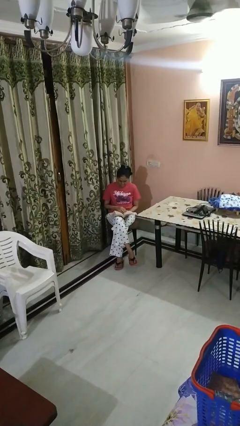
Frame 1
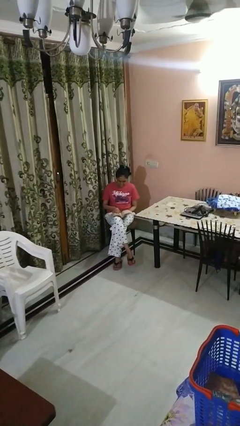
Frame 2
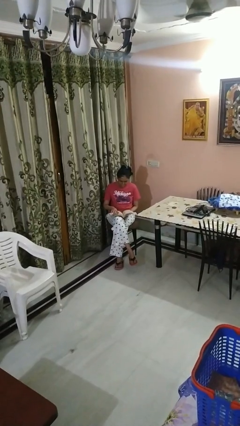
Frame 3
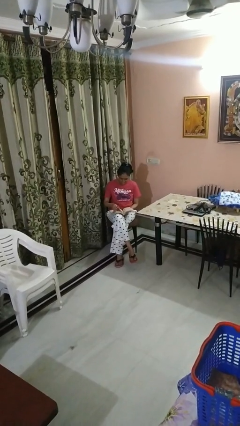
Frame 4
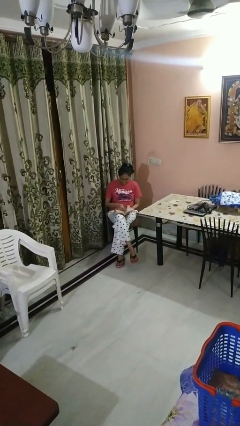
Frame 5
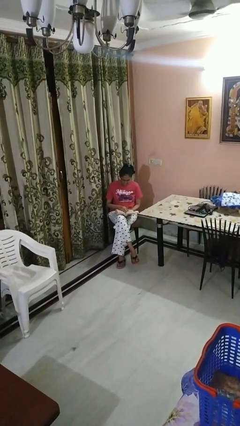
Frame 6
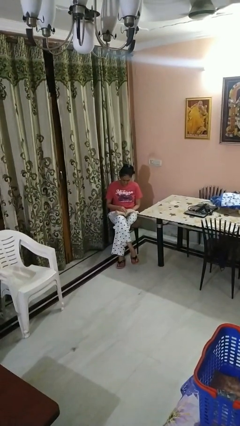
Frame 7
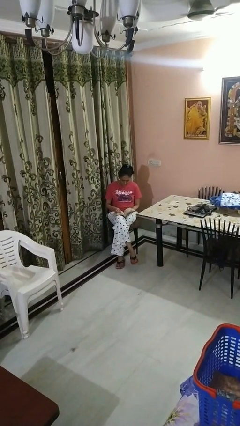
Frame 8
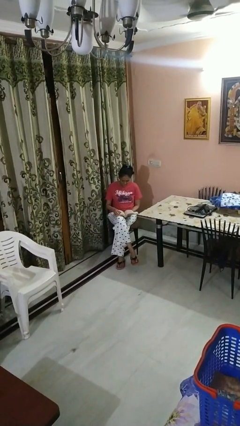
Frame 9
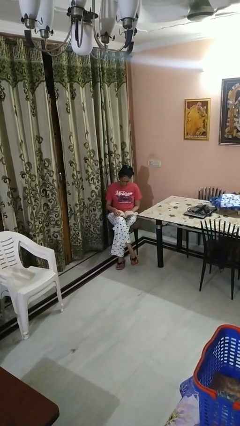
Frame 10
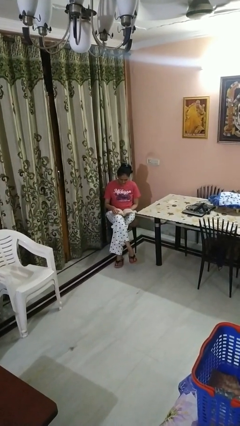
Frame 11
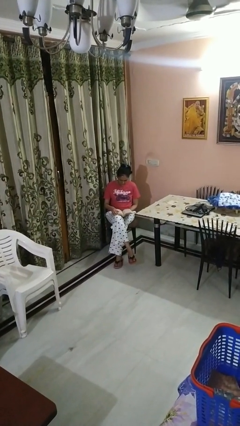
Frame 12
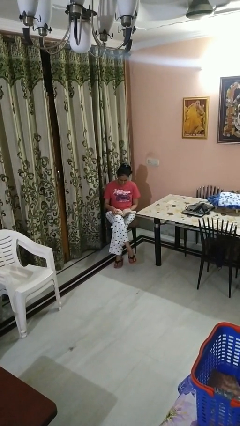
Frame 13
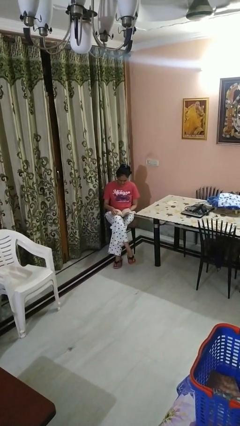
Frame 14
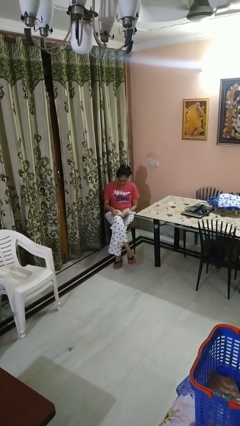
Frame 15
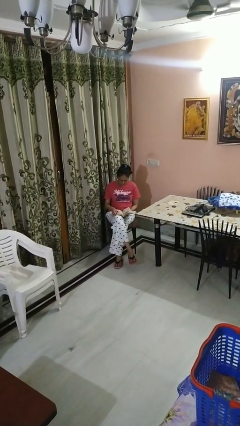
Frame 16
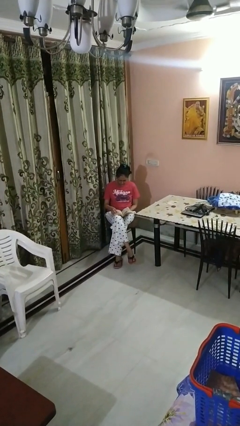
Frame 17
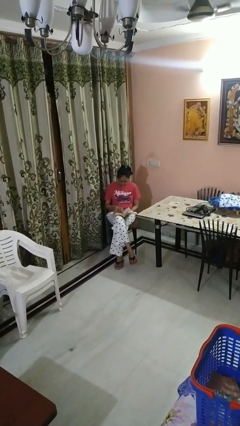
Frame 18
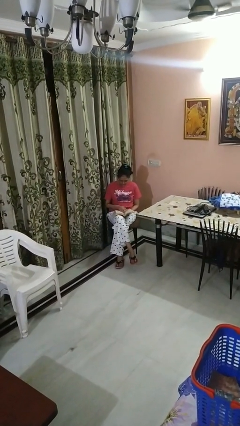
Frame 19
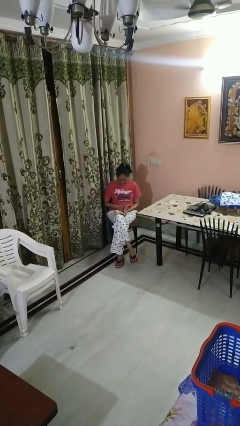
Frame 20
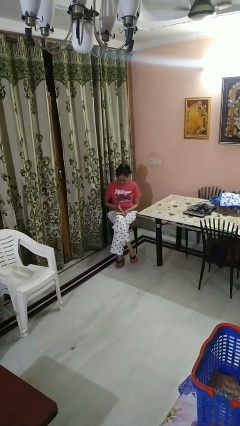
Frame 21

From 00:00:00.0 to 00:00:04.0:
person reads book

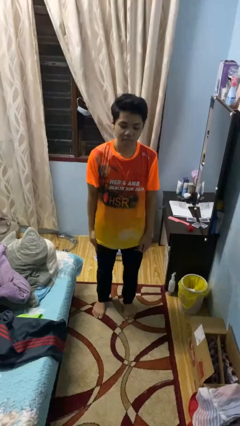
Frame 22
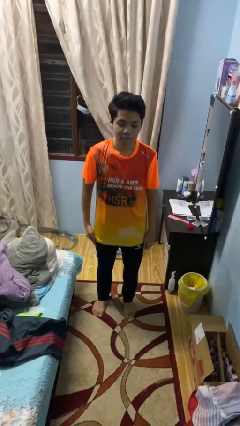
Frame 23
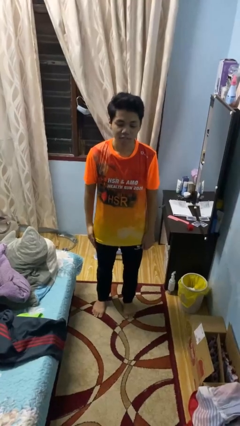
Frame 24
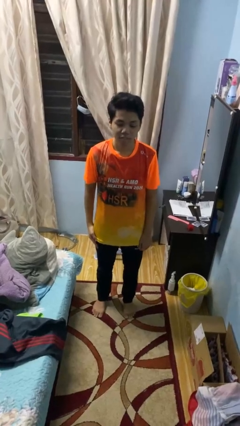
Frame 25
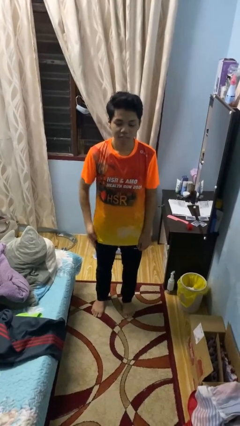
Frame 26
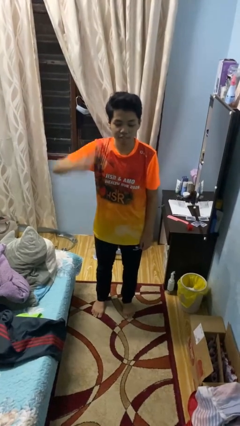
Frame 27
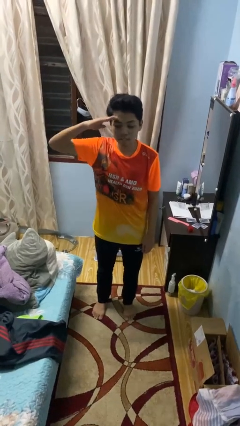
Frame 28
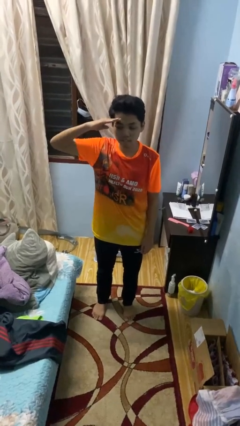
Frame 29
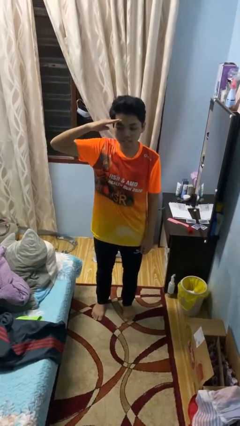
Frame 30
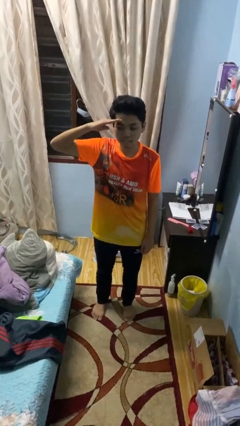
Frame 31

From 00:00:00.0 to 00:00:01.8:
person salutes

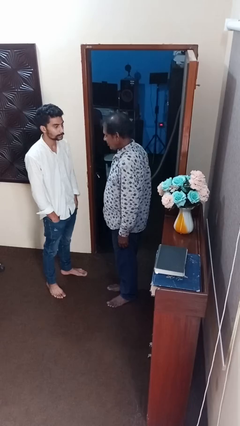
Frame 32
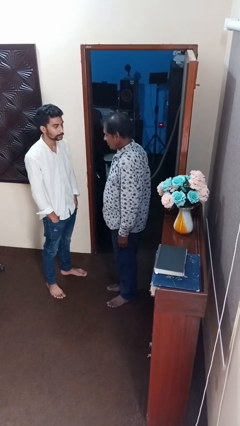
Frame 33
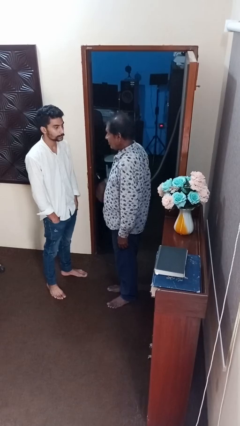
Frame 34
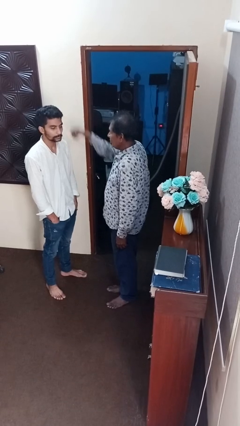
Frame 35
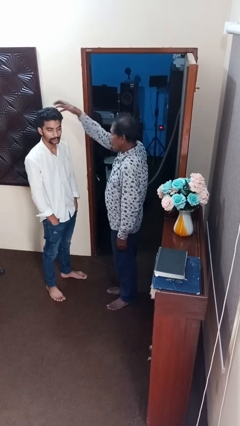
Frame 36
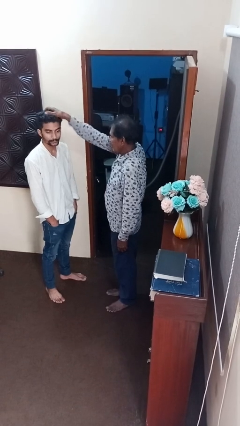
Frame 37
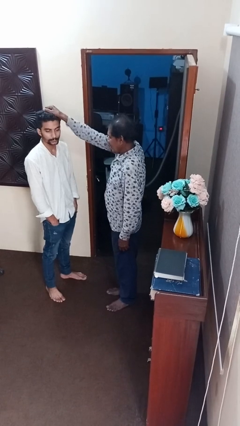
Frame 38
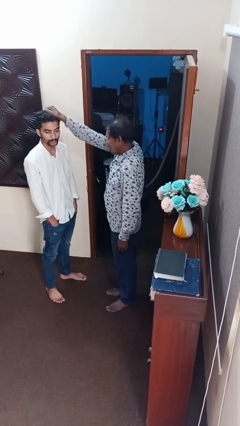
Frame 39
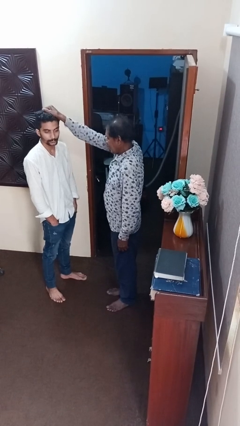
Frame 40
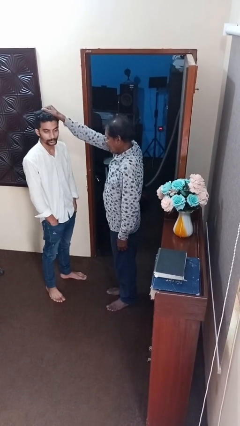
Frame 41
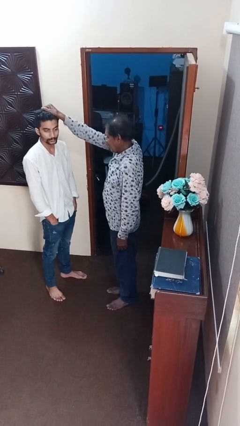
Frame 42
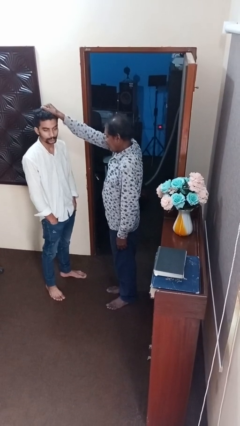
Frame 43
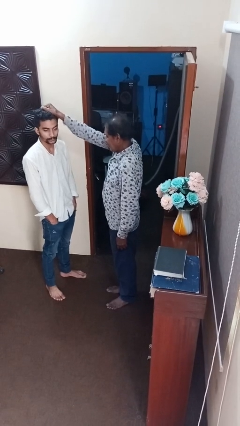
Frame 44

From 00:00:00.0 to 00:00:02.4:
person grabs person by hair

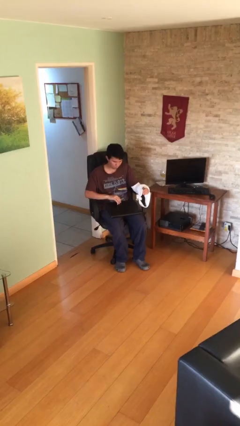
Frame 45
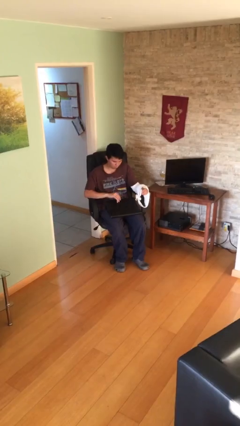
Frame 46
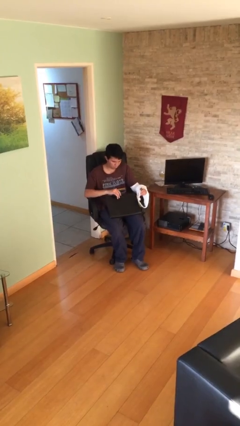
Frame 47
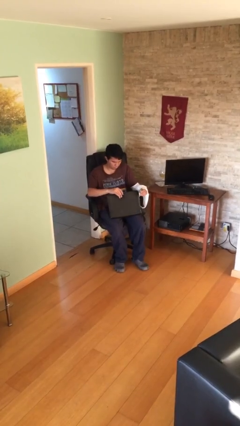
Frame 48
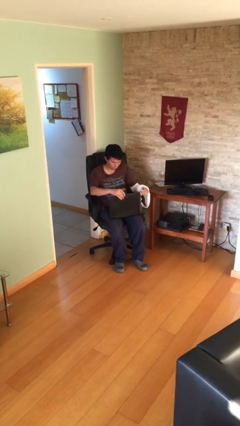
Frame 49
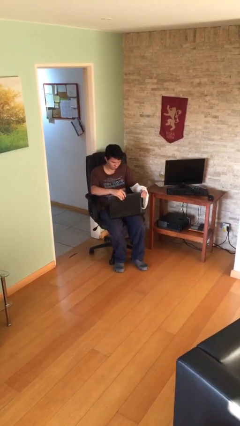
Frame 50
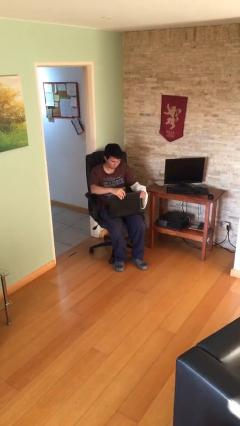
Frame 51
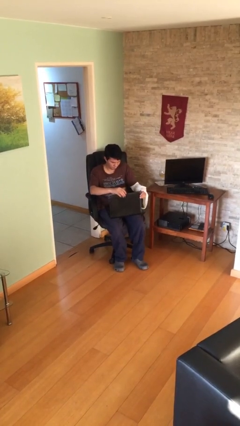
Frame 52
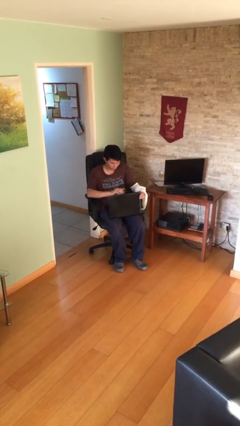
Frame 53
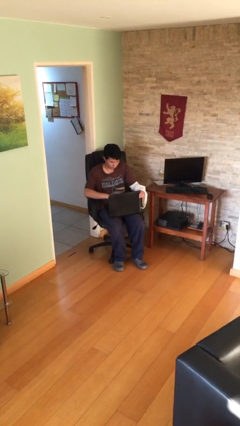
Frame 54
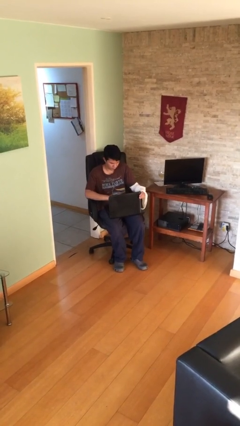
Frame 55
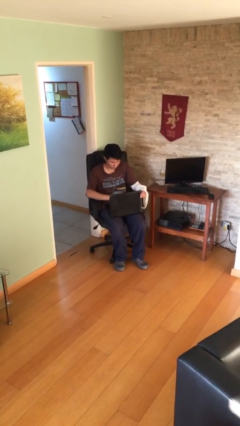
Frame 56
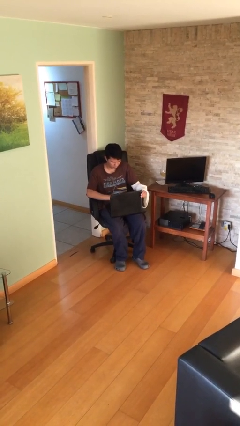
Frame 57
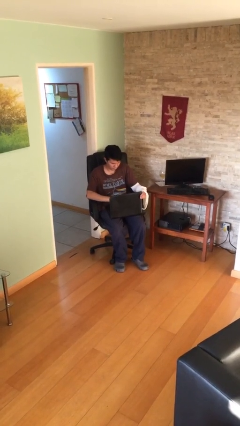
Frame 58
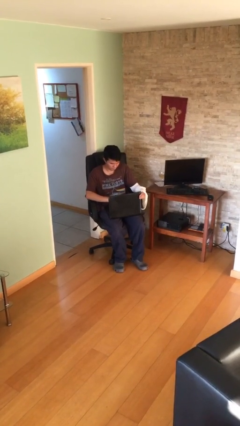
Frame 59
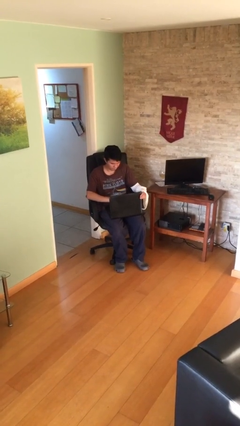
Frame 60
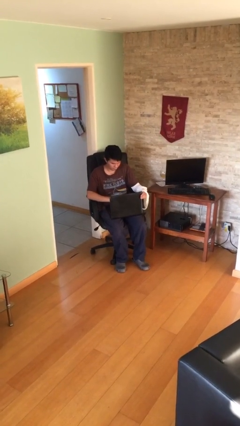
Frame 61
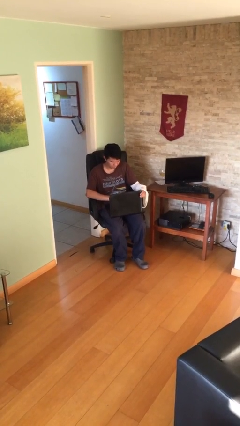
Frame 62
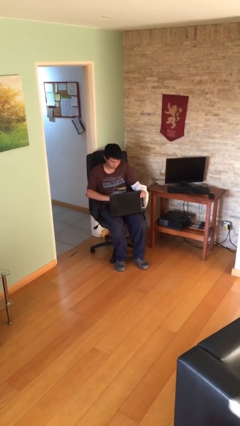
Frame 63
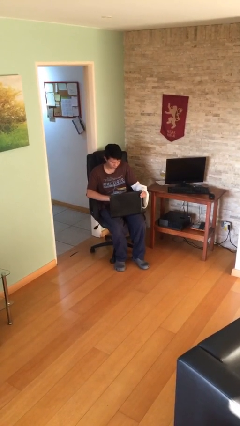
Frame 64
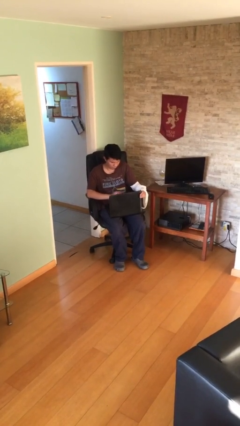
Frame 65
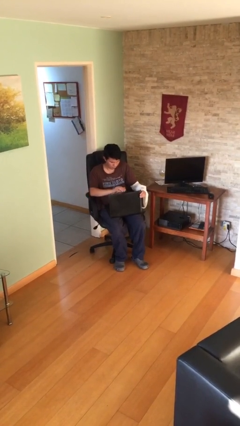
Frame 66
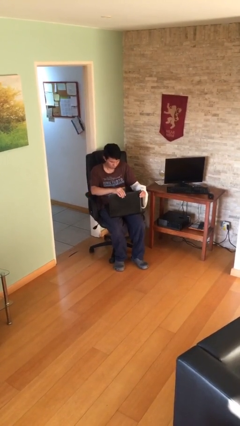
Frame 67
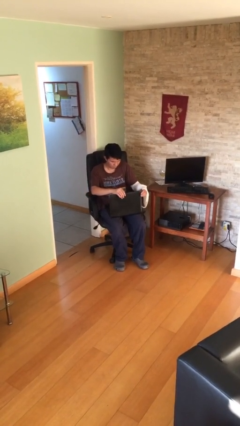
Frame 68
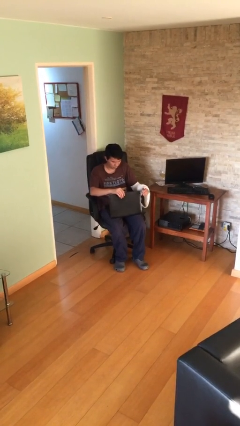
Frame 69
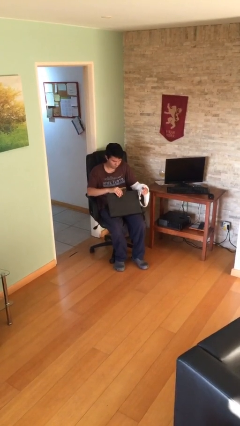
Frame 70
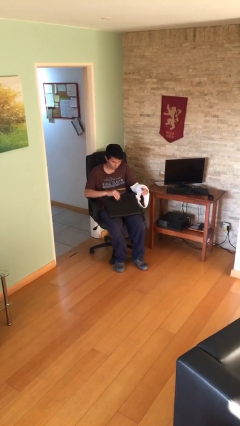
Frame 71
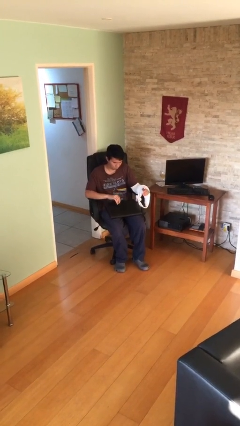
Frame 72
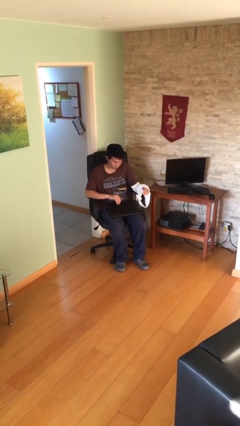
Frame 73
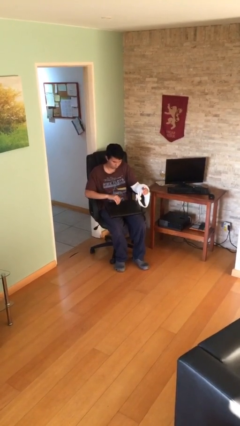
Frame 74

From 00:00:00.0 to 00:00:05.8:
person interacts with laptop

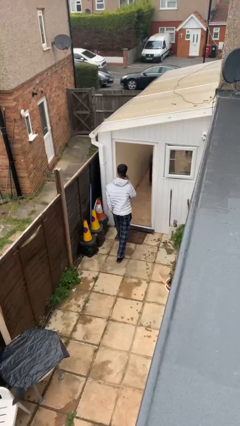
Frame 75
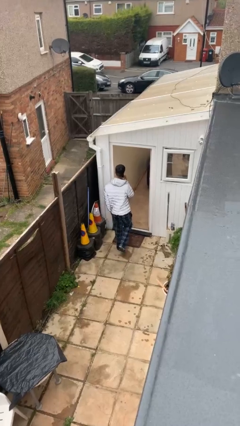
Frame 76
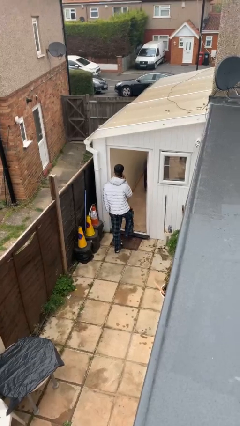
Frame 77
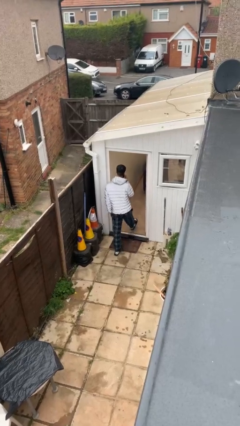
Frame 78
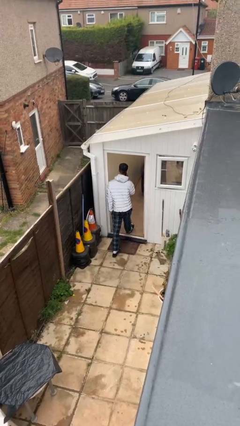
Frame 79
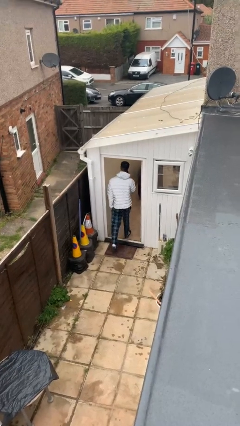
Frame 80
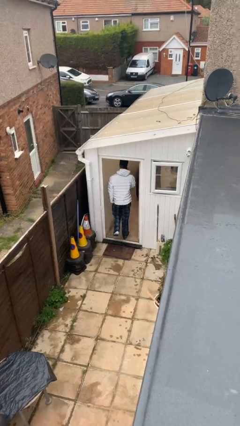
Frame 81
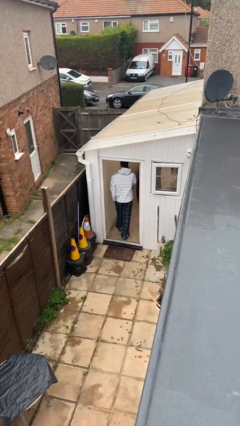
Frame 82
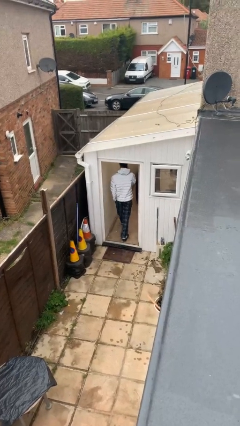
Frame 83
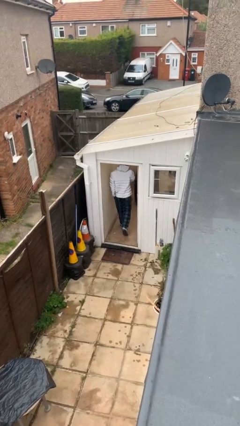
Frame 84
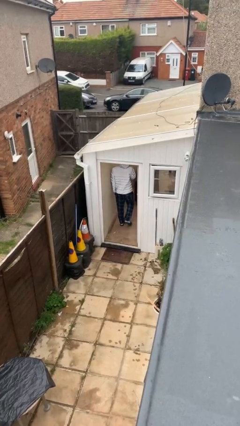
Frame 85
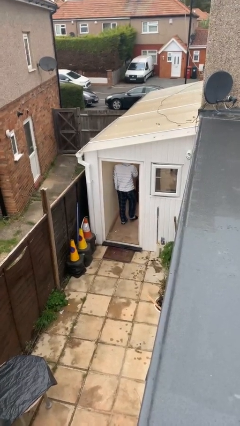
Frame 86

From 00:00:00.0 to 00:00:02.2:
person exits scene through structure

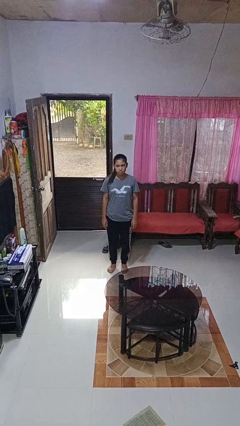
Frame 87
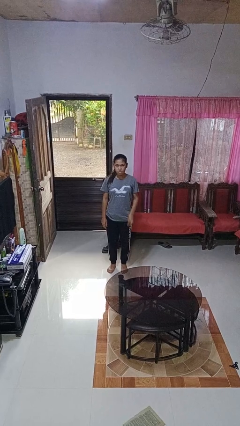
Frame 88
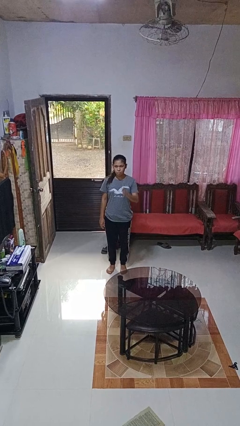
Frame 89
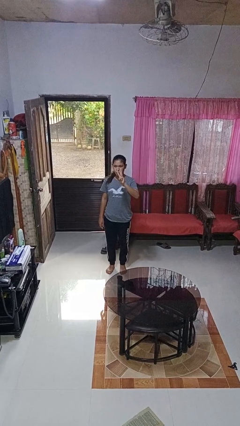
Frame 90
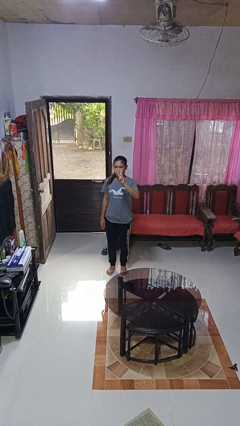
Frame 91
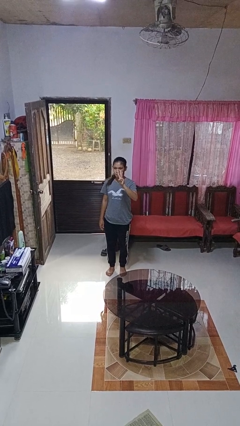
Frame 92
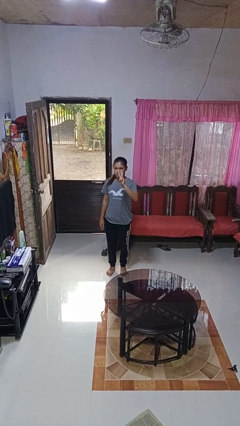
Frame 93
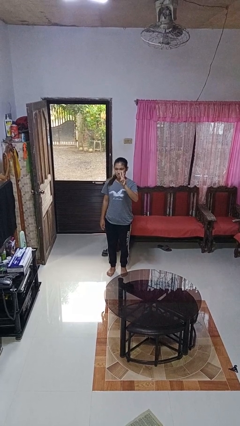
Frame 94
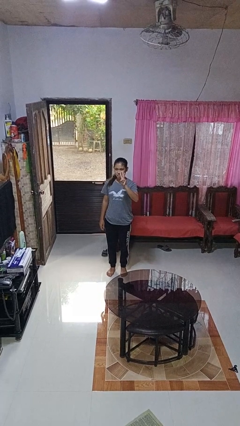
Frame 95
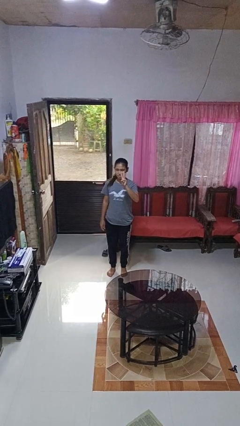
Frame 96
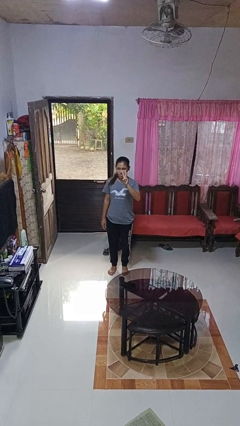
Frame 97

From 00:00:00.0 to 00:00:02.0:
person gestures number three
